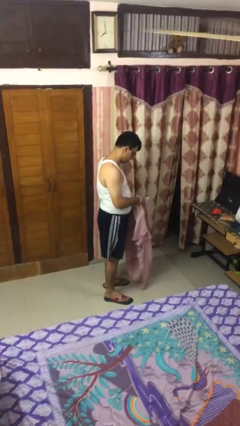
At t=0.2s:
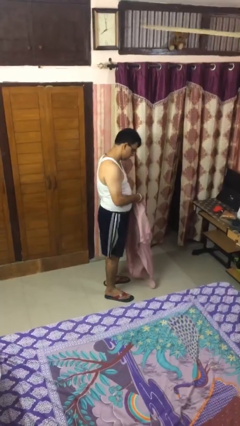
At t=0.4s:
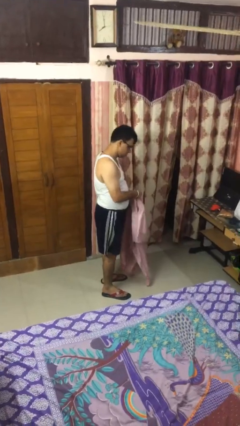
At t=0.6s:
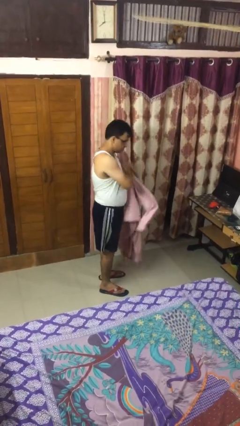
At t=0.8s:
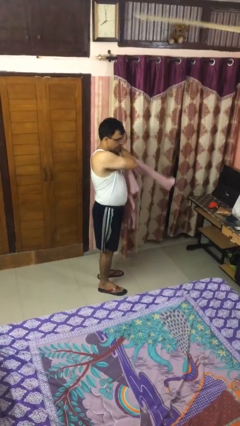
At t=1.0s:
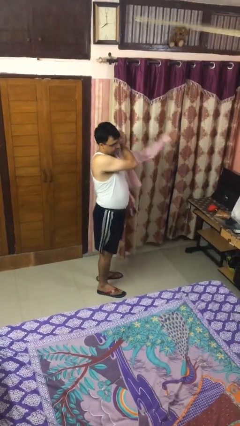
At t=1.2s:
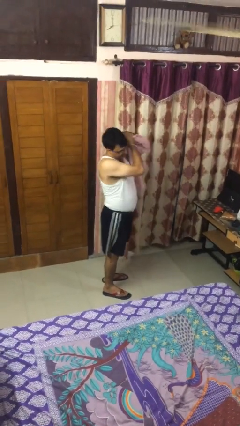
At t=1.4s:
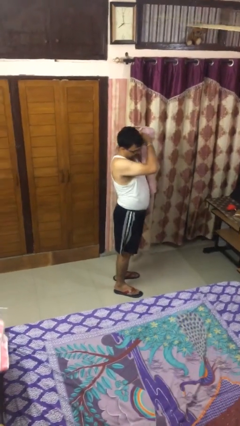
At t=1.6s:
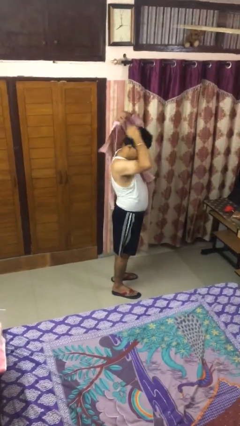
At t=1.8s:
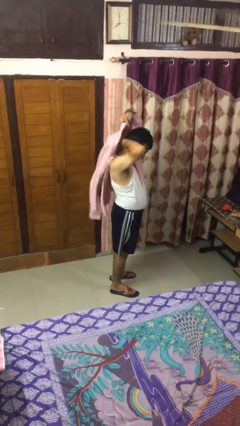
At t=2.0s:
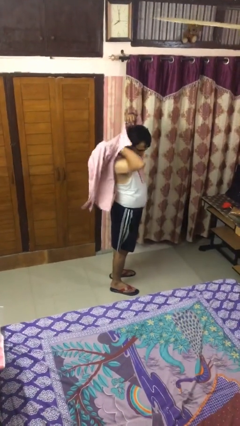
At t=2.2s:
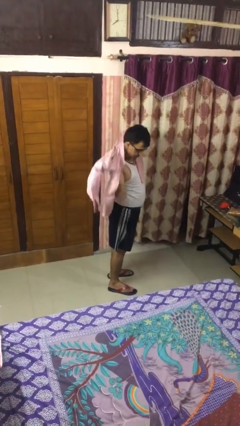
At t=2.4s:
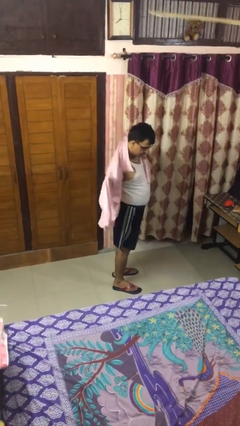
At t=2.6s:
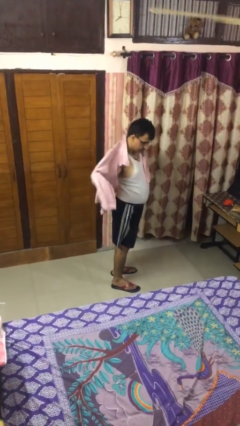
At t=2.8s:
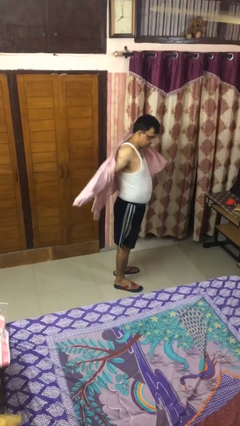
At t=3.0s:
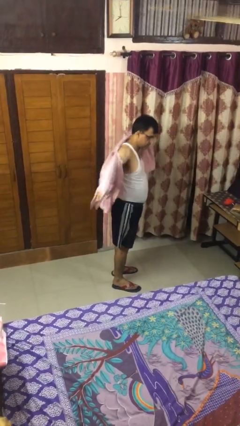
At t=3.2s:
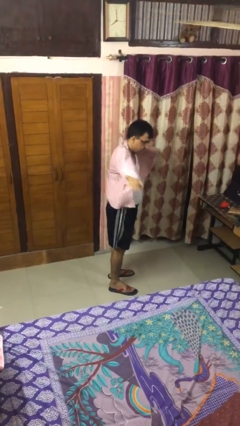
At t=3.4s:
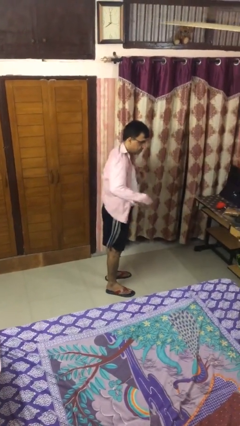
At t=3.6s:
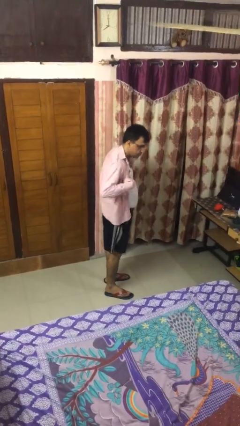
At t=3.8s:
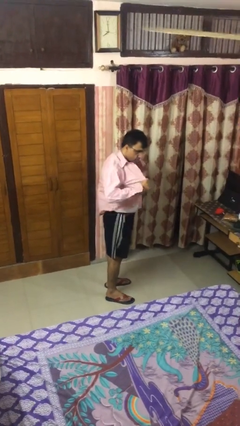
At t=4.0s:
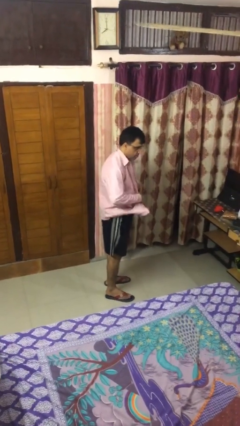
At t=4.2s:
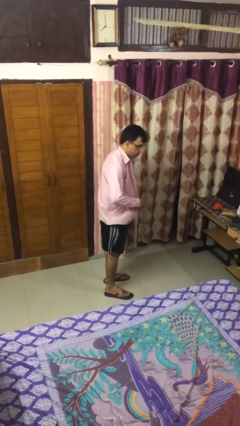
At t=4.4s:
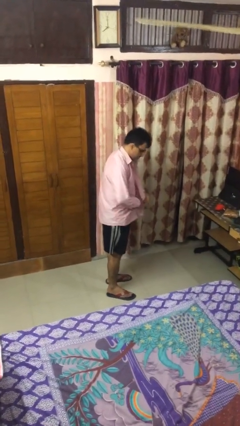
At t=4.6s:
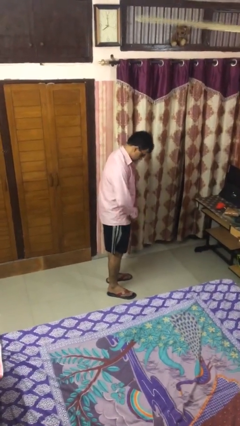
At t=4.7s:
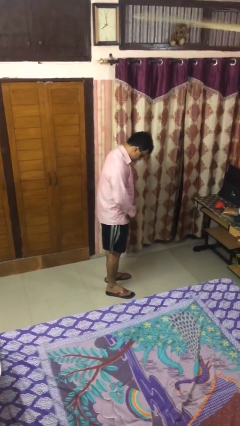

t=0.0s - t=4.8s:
person puts on shirt

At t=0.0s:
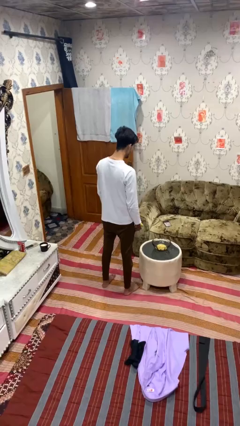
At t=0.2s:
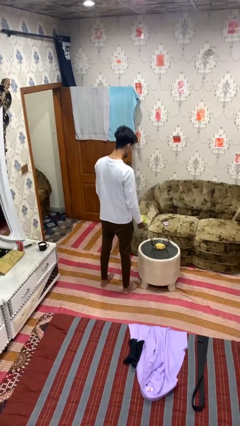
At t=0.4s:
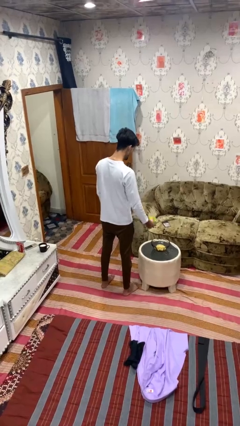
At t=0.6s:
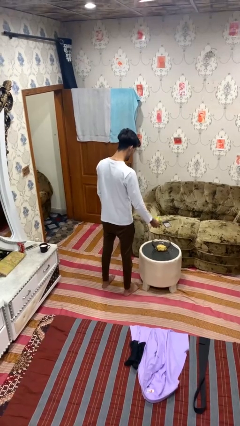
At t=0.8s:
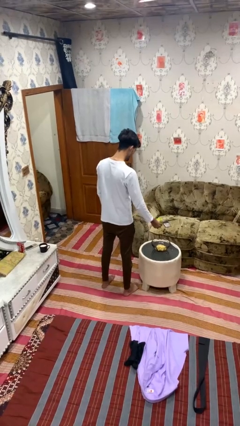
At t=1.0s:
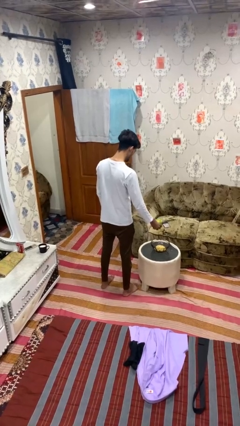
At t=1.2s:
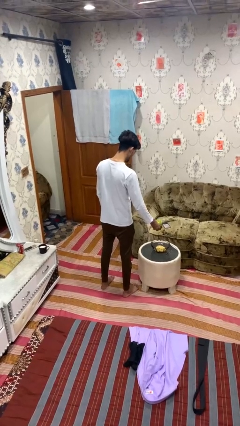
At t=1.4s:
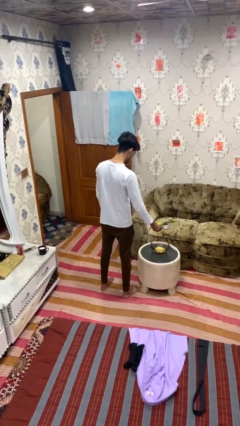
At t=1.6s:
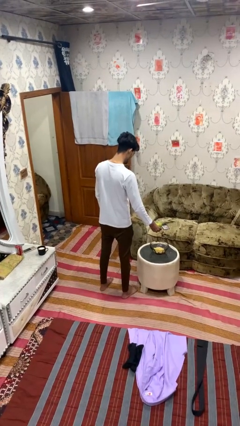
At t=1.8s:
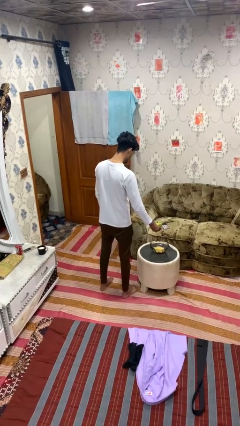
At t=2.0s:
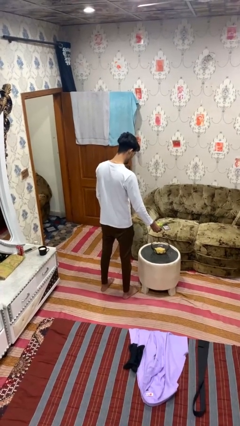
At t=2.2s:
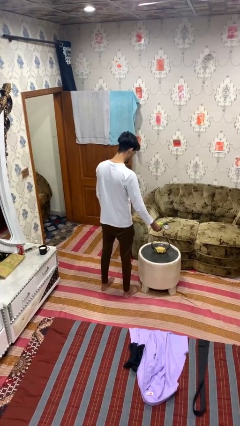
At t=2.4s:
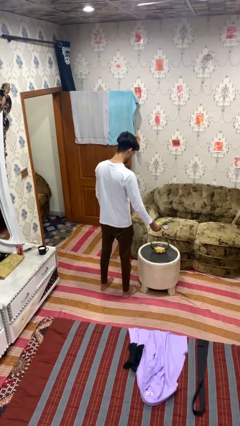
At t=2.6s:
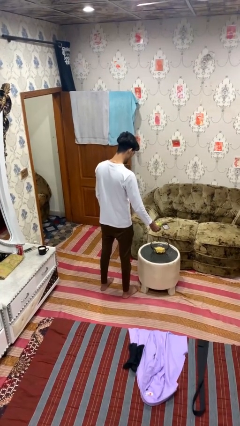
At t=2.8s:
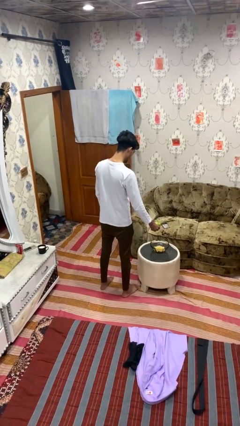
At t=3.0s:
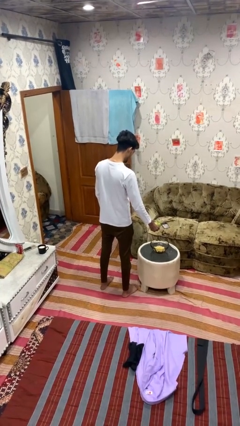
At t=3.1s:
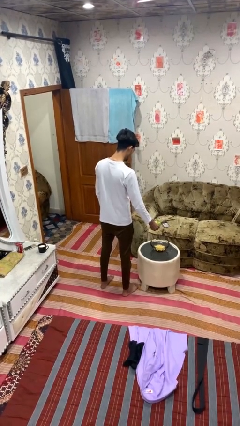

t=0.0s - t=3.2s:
person pours into bowl

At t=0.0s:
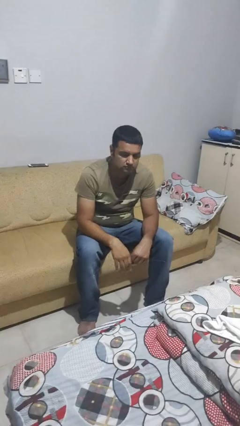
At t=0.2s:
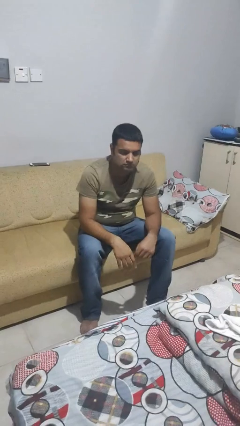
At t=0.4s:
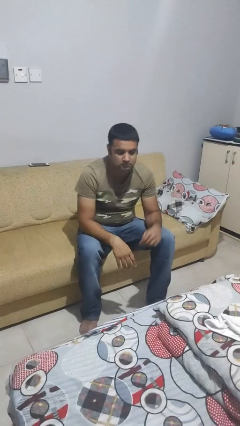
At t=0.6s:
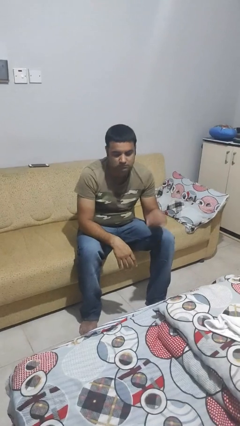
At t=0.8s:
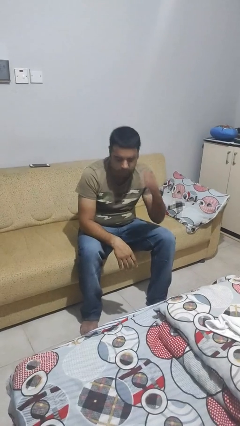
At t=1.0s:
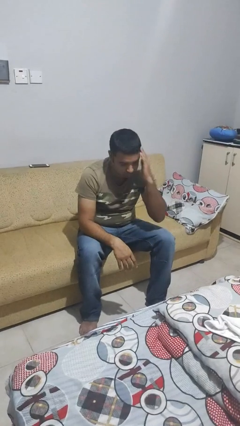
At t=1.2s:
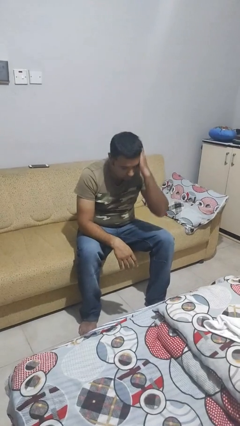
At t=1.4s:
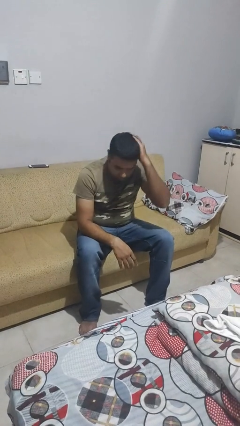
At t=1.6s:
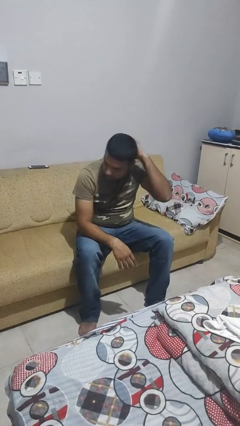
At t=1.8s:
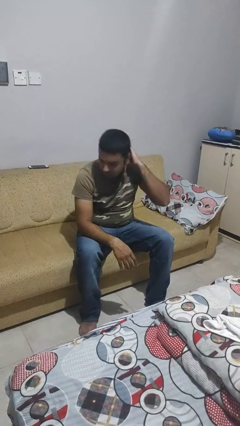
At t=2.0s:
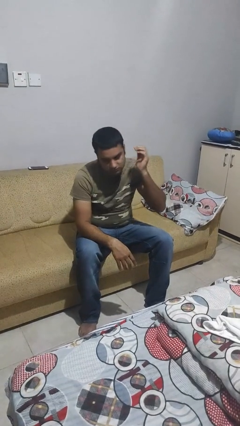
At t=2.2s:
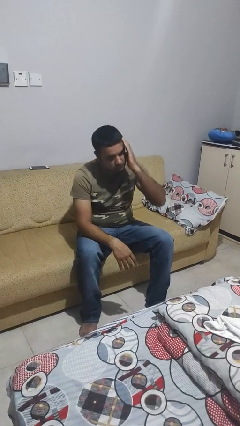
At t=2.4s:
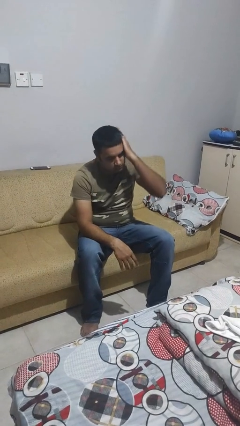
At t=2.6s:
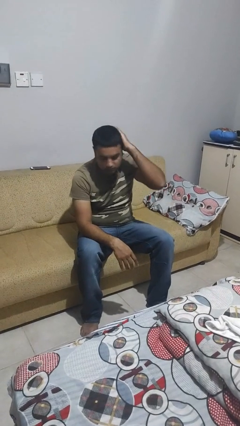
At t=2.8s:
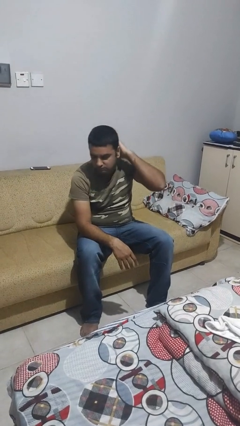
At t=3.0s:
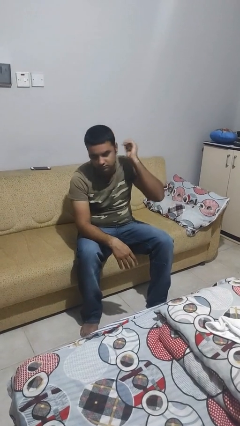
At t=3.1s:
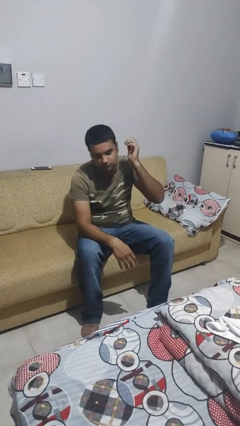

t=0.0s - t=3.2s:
person strokes hair

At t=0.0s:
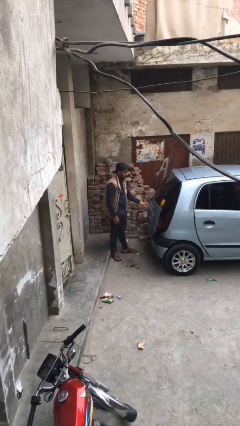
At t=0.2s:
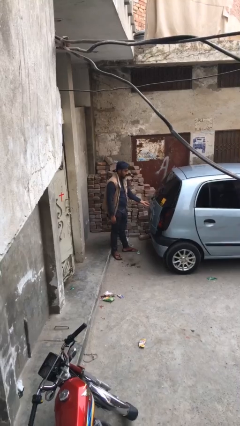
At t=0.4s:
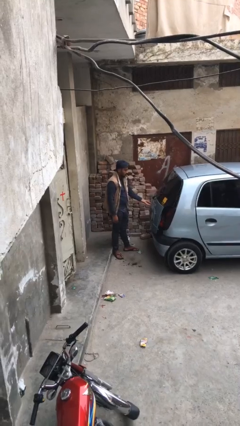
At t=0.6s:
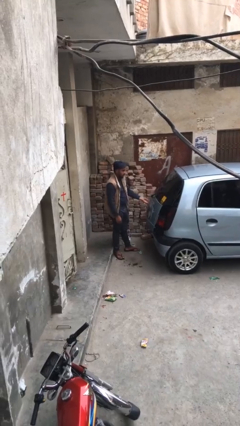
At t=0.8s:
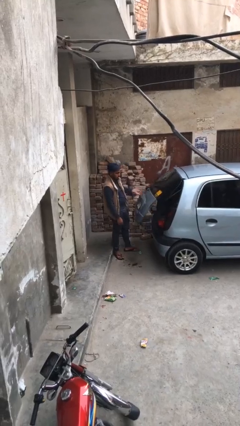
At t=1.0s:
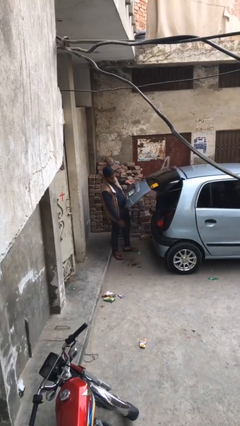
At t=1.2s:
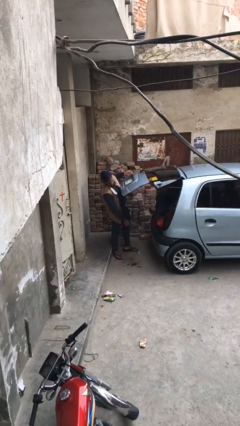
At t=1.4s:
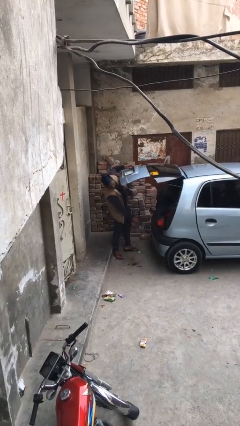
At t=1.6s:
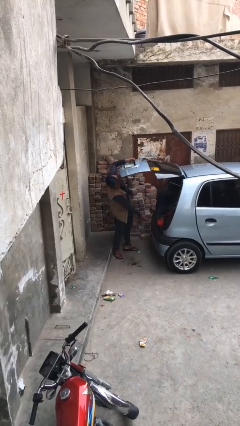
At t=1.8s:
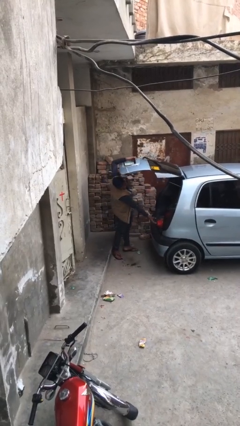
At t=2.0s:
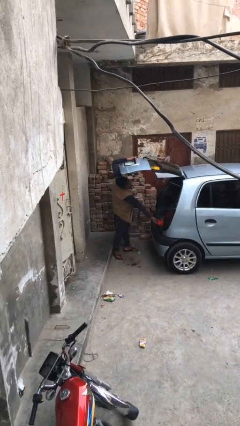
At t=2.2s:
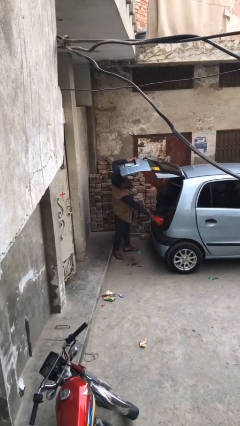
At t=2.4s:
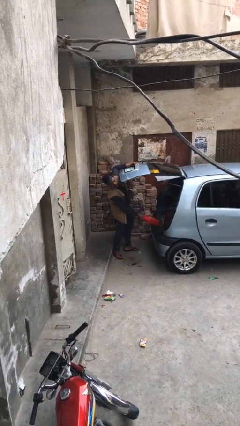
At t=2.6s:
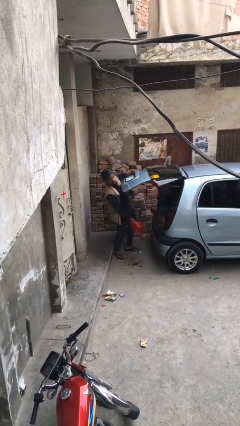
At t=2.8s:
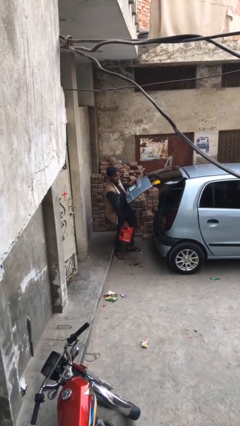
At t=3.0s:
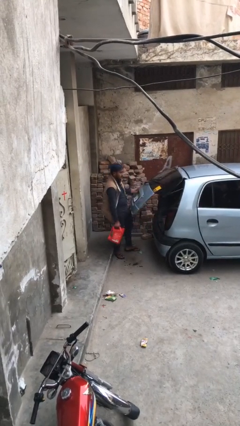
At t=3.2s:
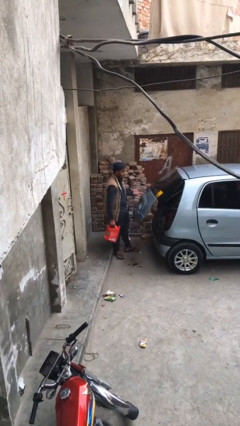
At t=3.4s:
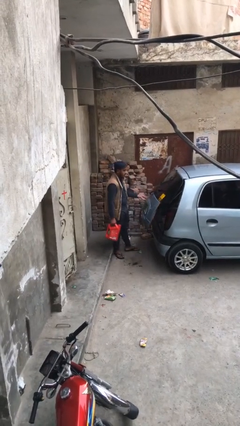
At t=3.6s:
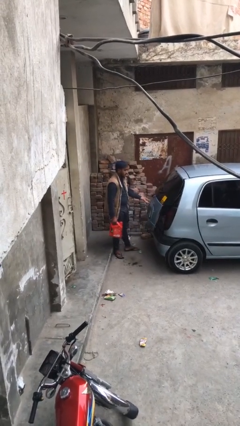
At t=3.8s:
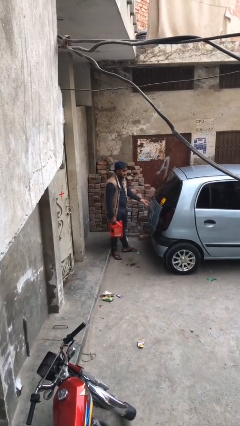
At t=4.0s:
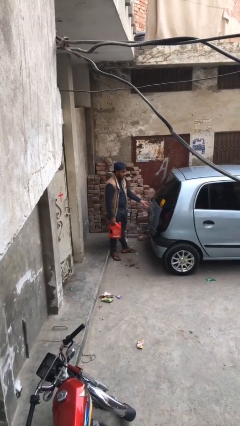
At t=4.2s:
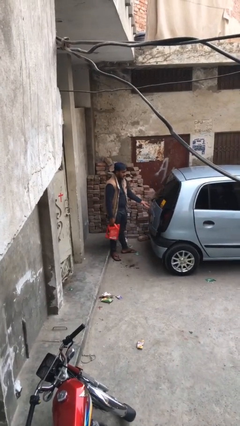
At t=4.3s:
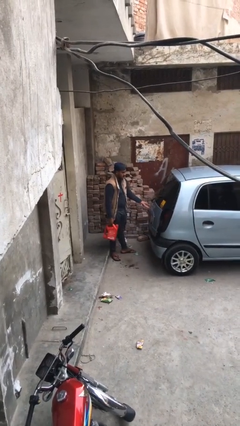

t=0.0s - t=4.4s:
person unloads car

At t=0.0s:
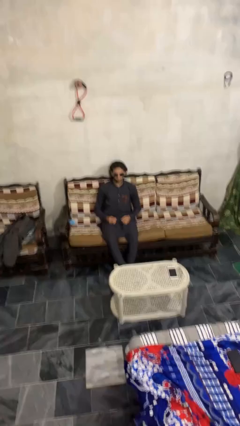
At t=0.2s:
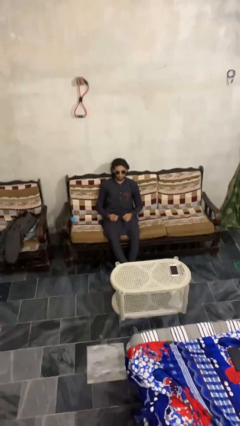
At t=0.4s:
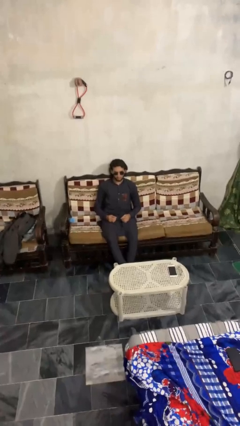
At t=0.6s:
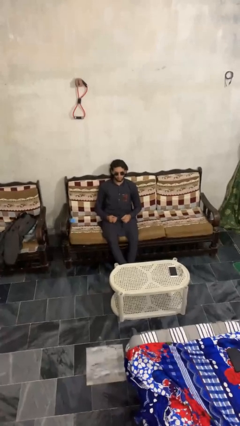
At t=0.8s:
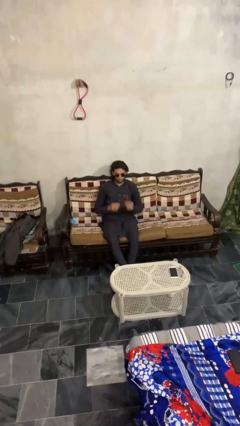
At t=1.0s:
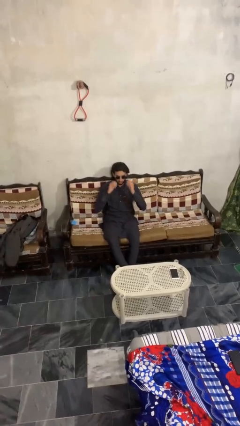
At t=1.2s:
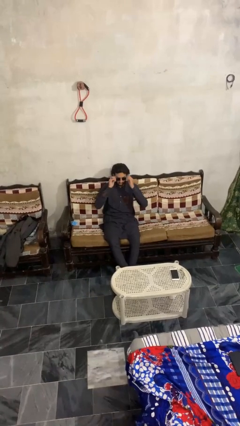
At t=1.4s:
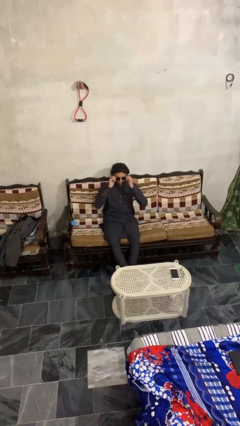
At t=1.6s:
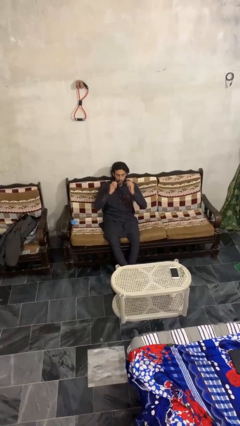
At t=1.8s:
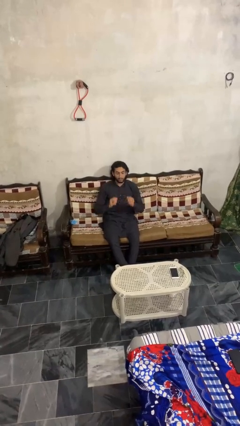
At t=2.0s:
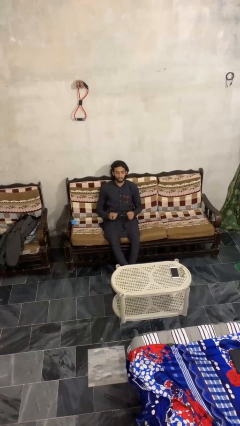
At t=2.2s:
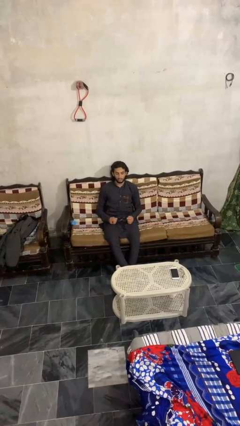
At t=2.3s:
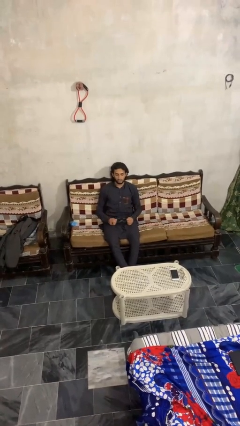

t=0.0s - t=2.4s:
person takes off sunglasses
